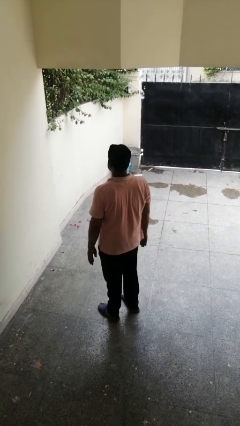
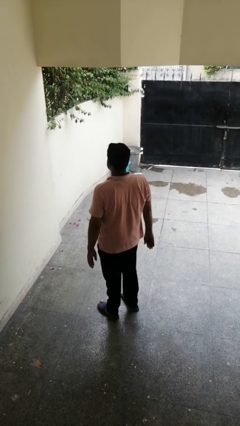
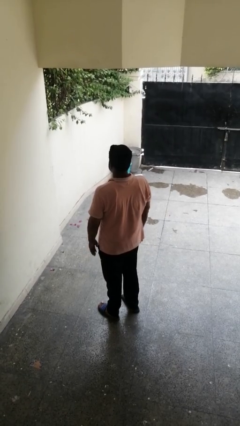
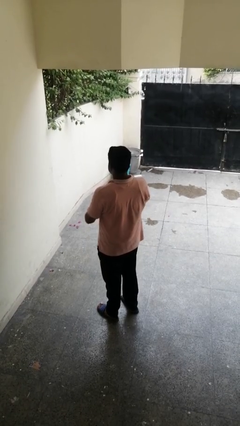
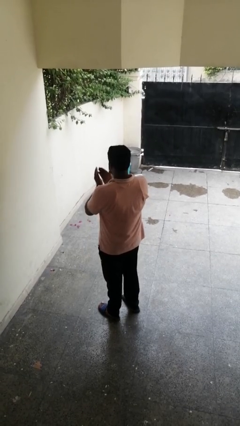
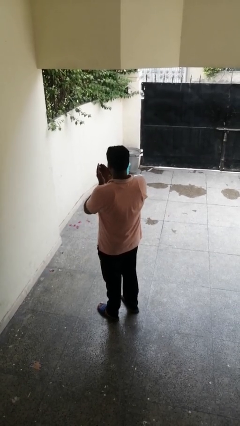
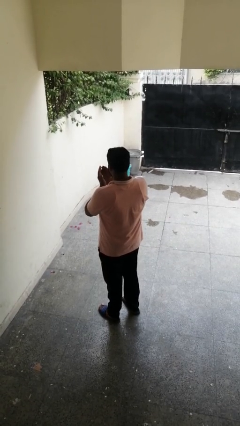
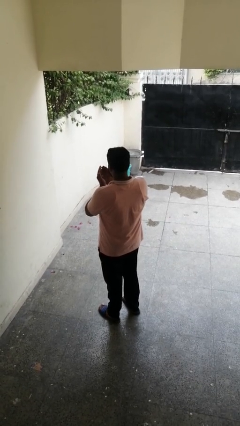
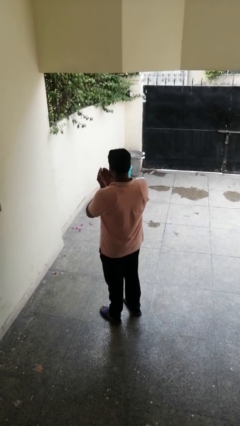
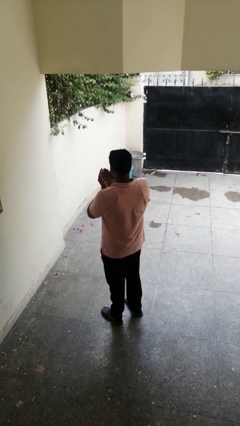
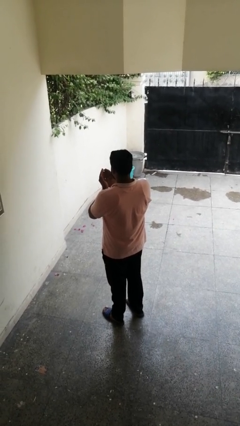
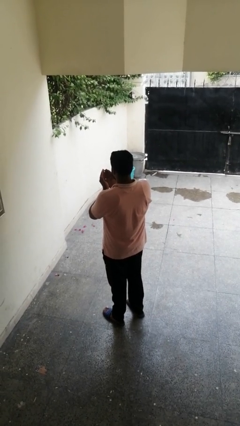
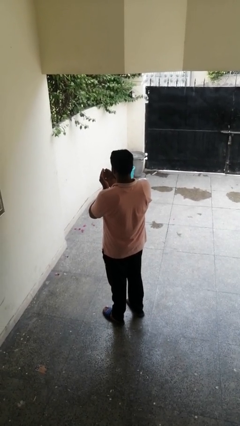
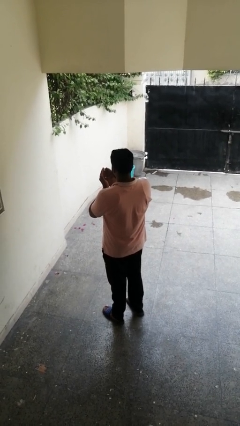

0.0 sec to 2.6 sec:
person prays

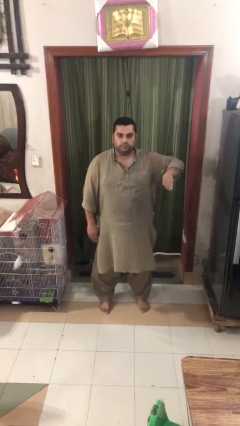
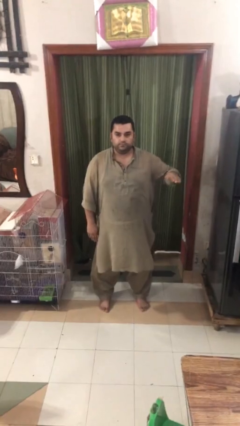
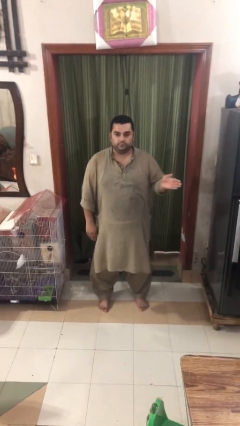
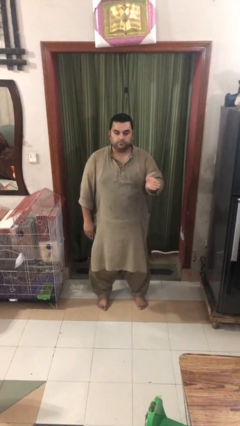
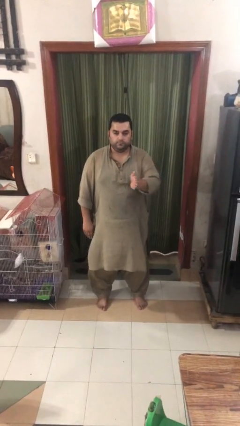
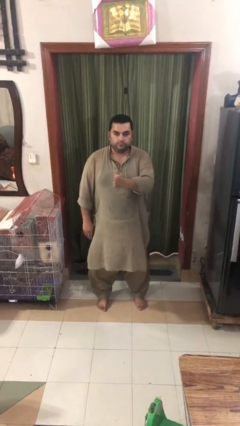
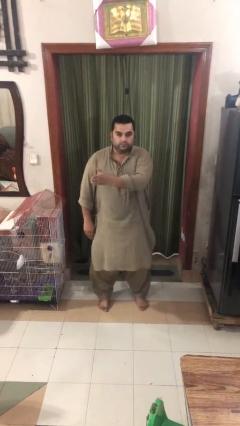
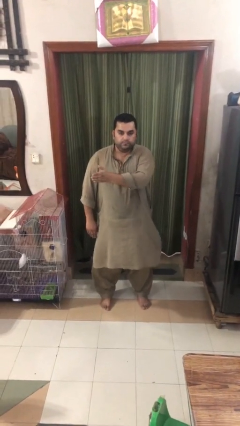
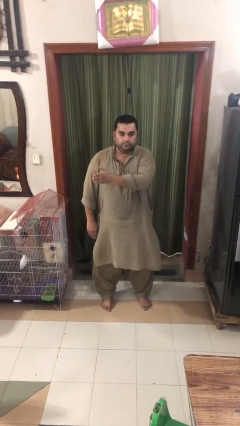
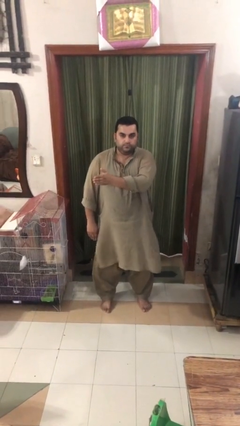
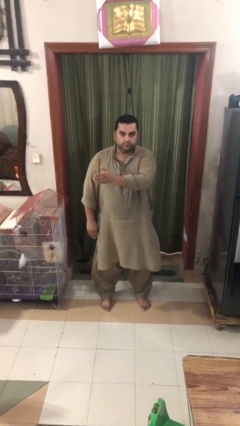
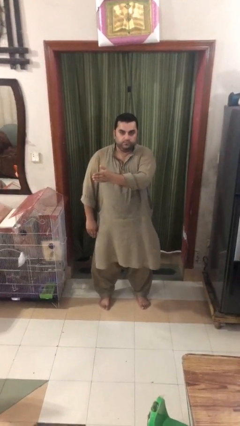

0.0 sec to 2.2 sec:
person gestures swipe right

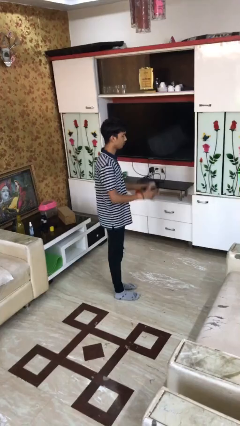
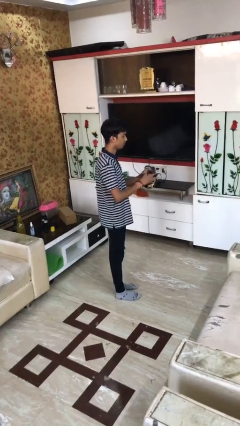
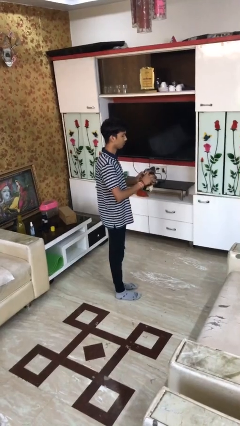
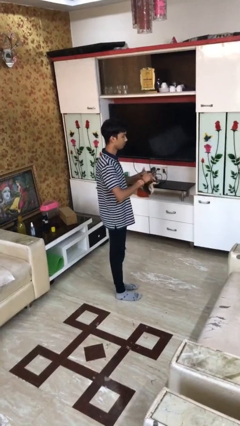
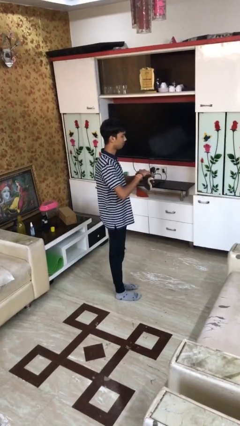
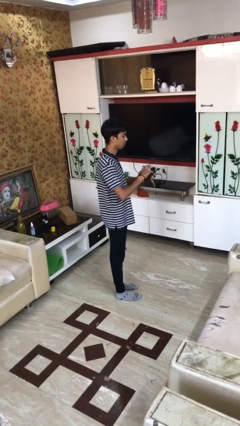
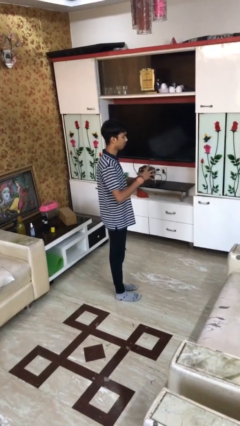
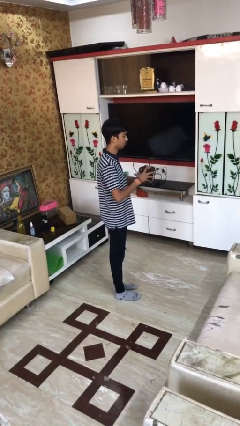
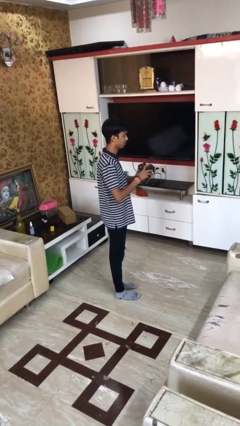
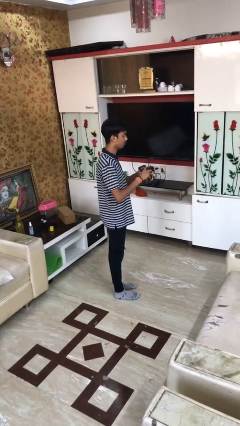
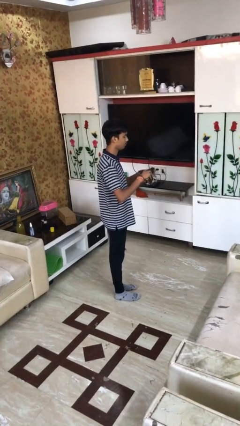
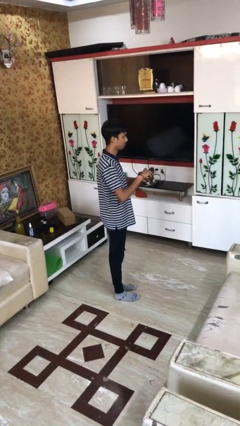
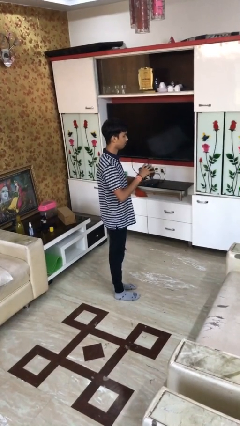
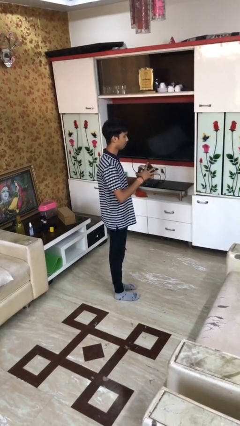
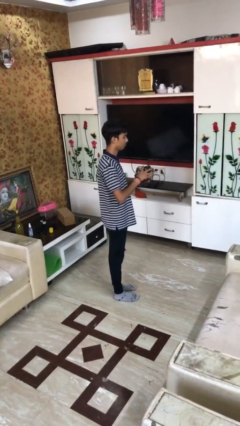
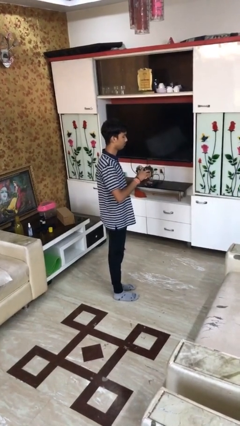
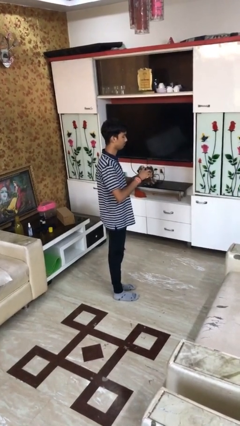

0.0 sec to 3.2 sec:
person squeezes object

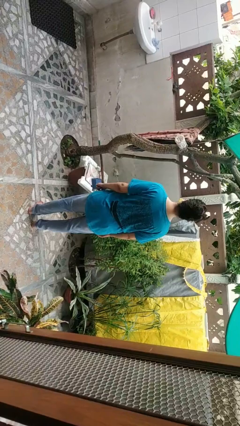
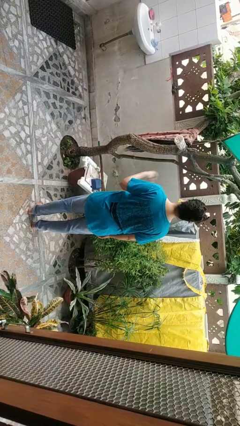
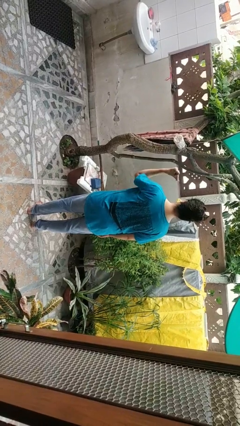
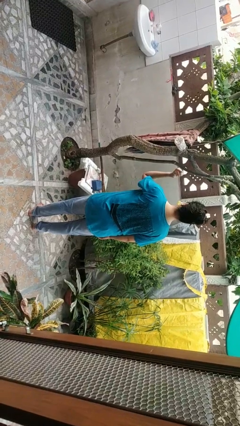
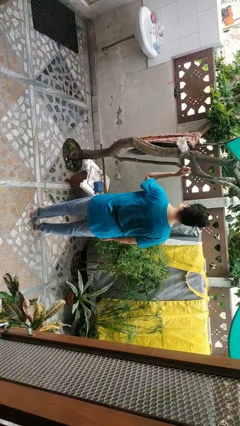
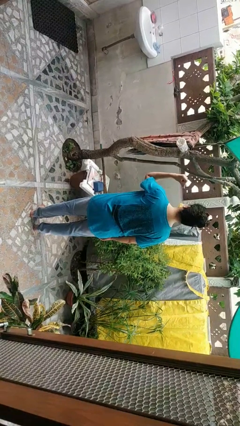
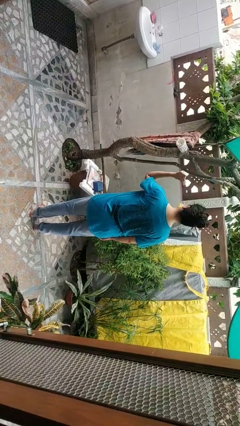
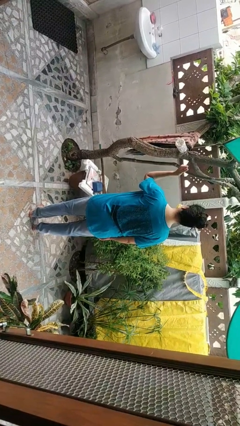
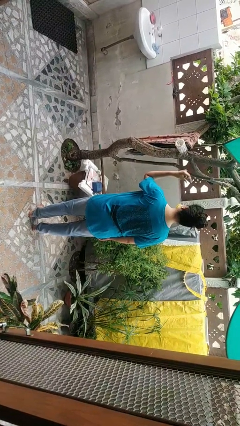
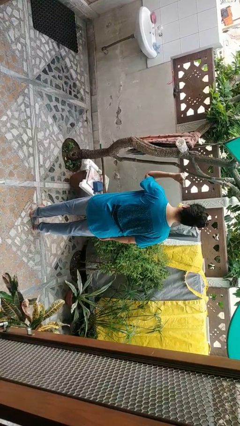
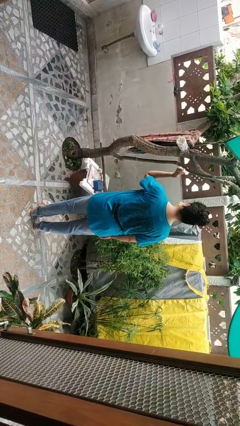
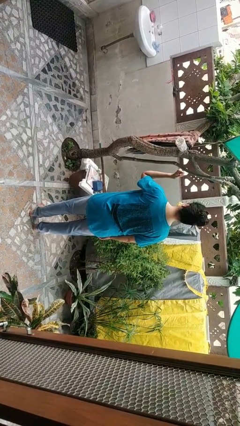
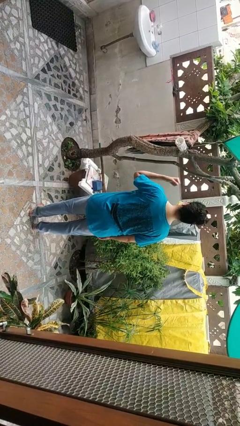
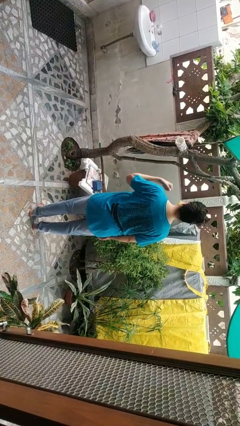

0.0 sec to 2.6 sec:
person snaps fingers

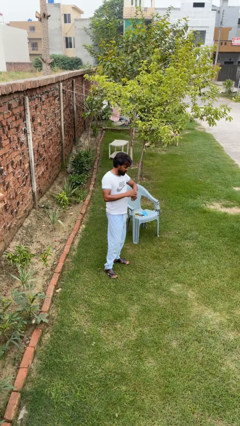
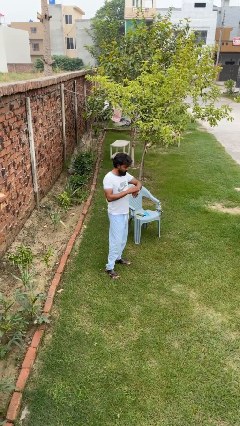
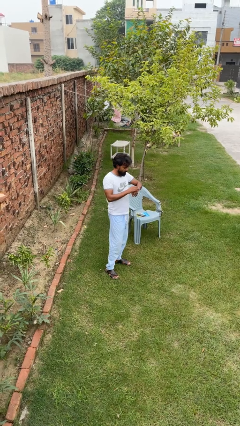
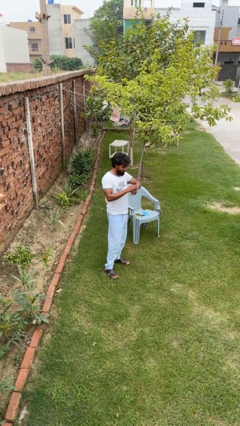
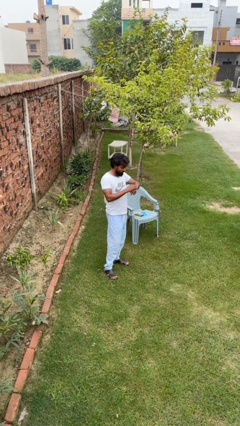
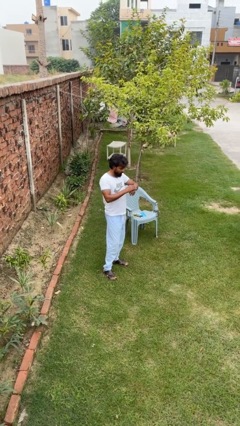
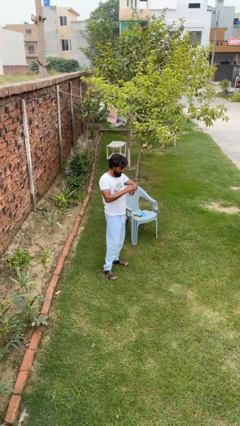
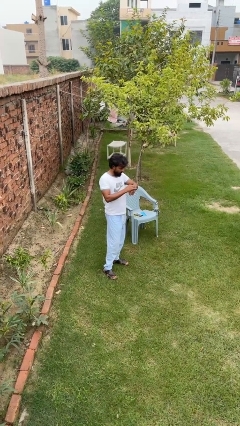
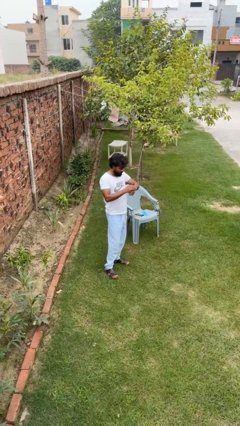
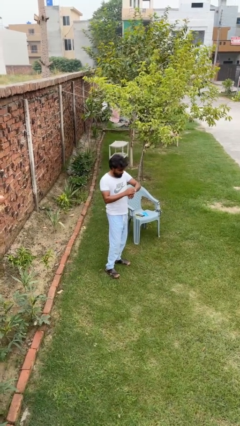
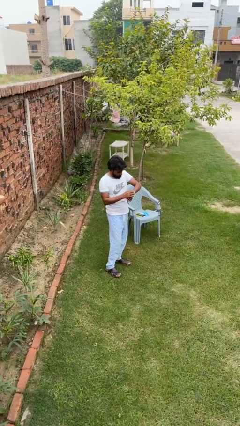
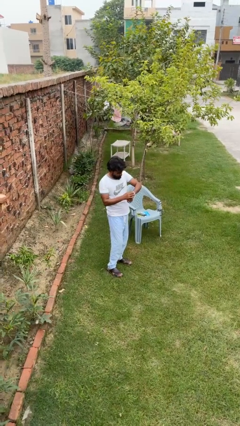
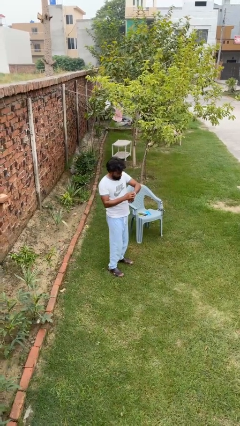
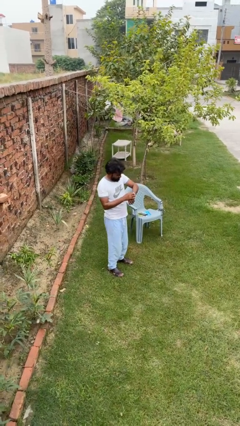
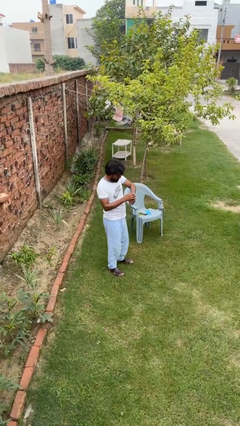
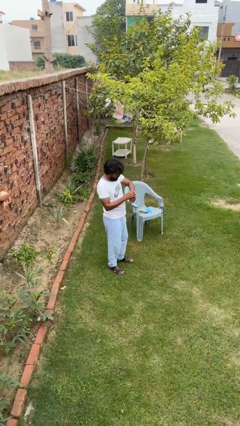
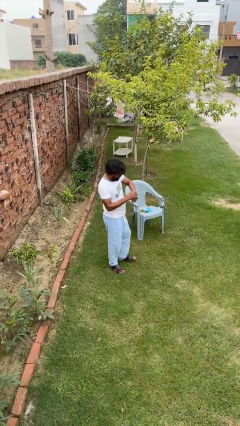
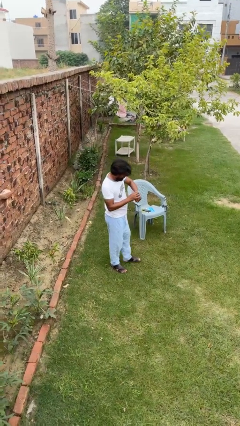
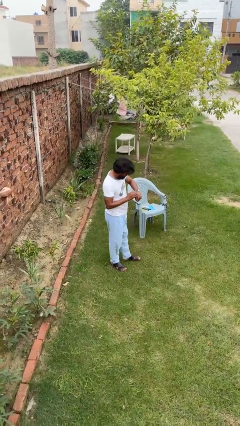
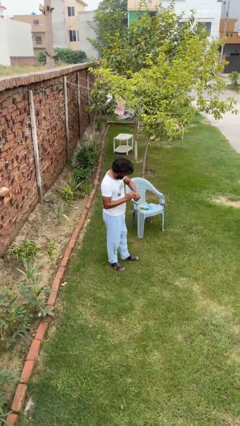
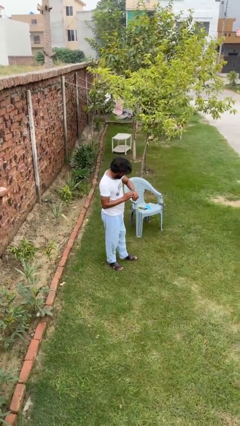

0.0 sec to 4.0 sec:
person looks at wristwatch

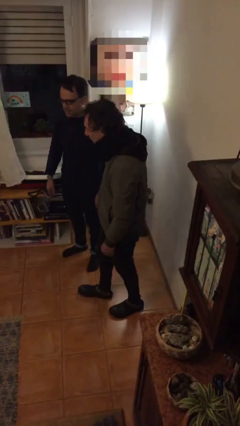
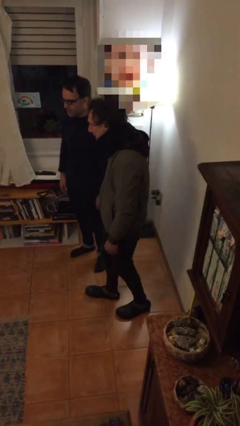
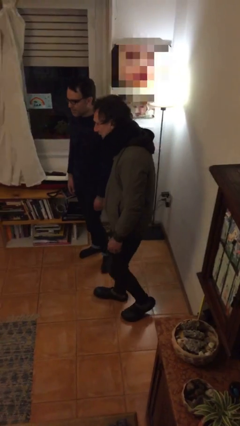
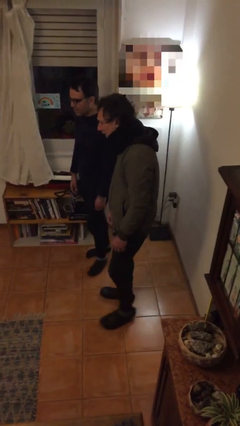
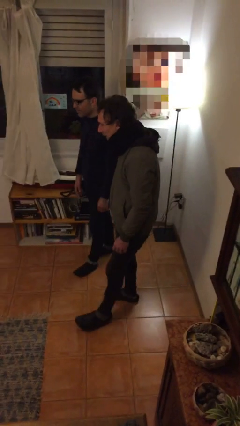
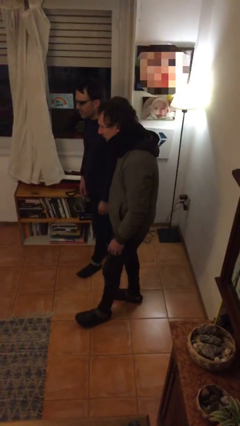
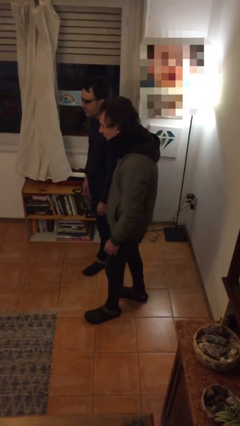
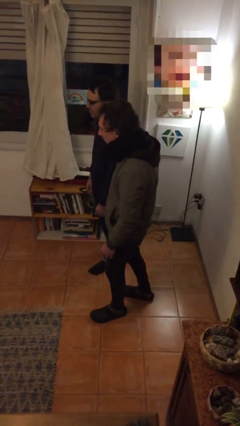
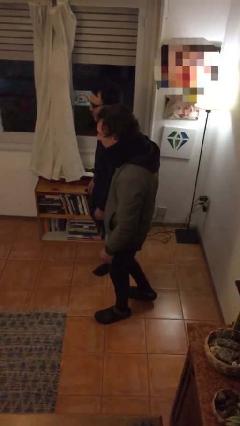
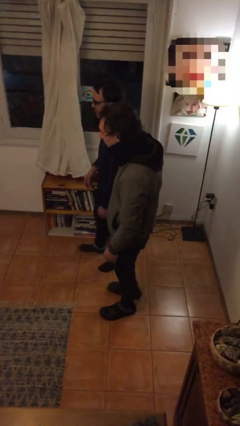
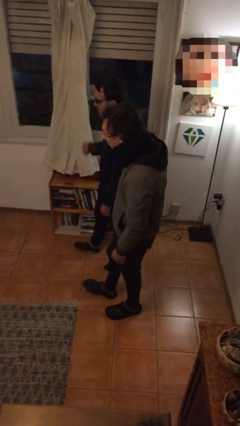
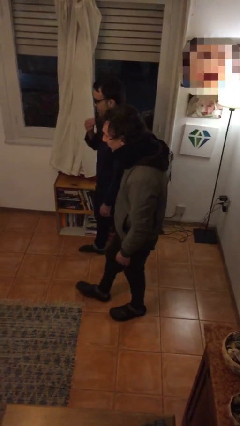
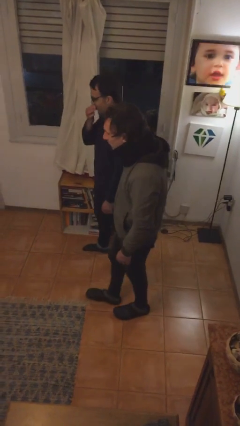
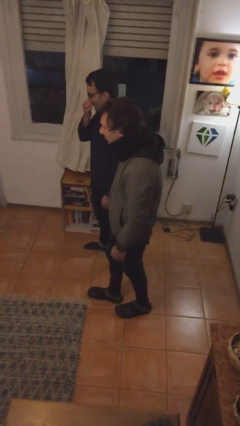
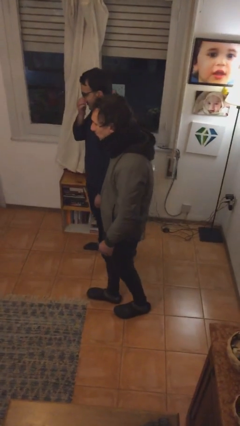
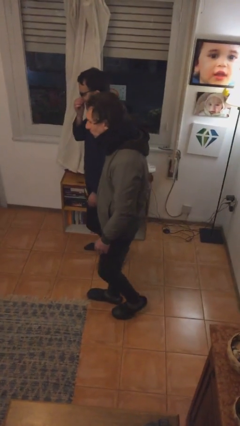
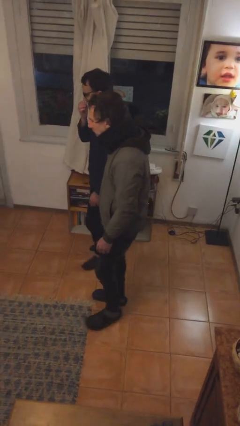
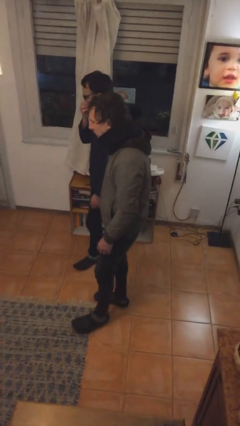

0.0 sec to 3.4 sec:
person talks to person
